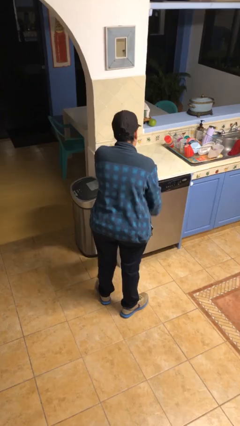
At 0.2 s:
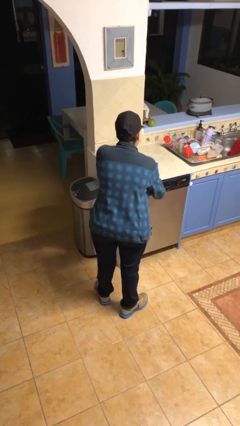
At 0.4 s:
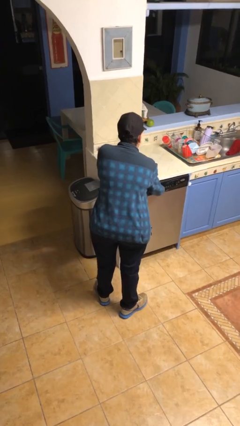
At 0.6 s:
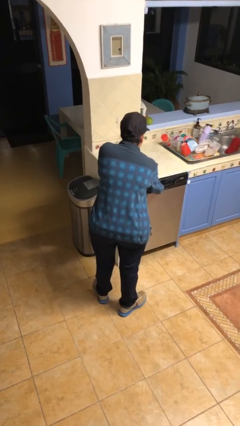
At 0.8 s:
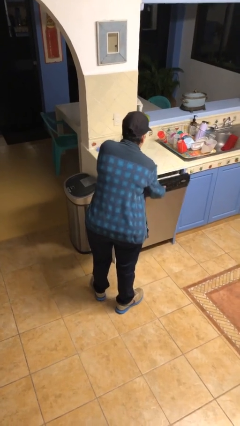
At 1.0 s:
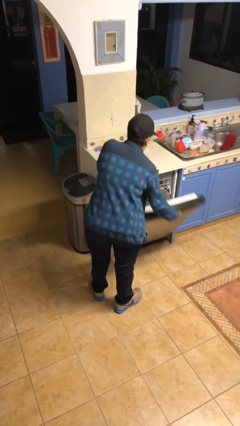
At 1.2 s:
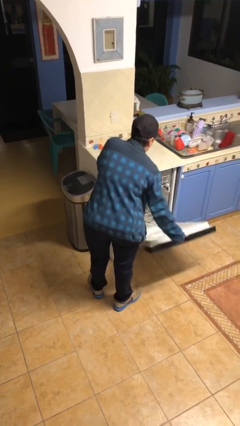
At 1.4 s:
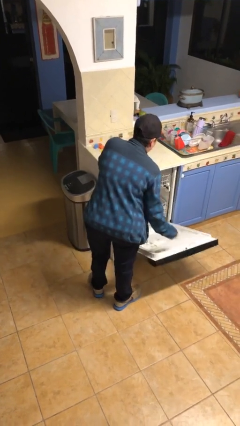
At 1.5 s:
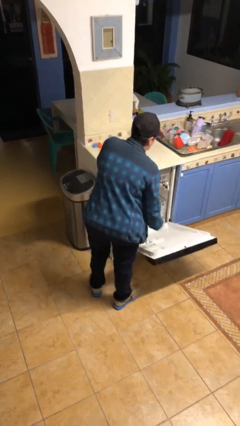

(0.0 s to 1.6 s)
person opens dishwasher

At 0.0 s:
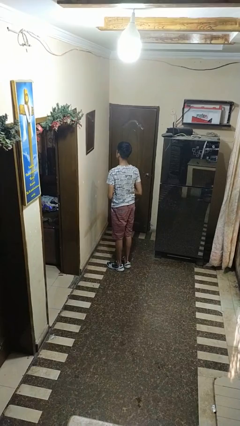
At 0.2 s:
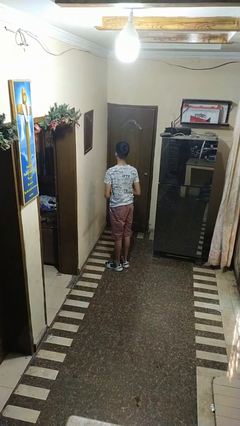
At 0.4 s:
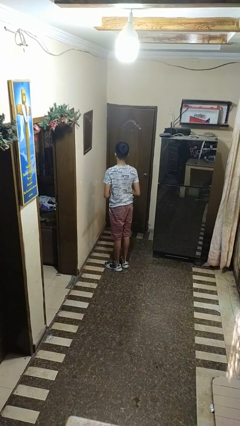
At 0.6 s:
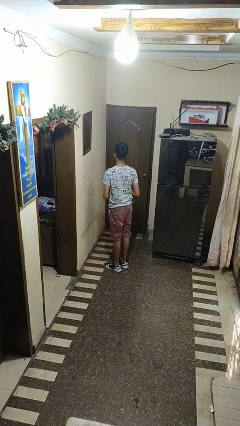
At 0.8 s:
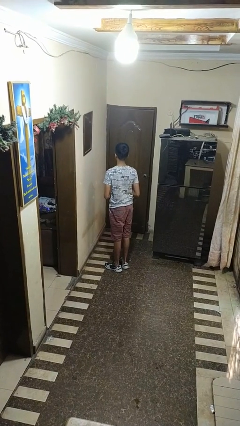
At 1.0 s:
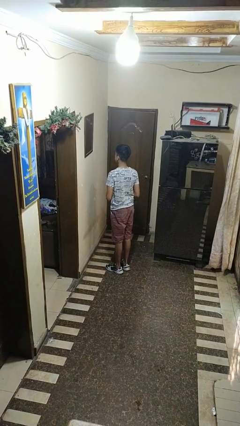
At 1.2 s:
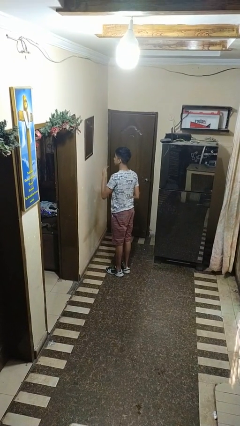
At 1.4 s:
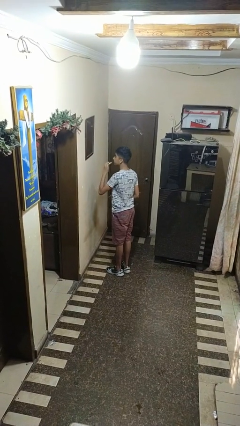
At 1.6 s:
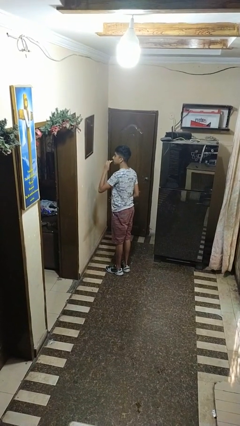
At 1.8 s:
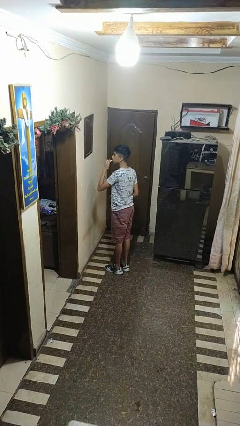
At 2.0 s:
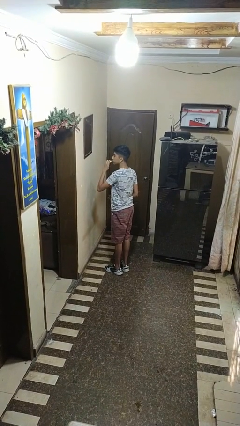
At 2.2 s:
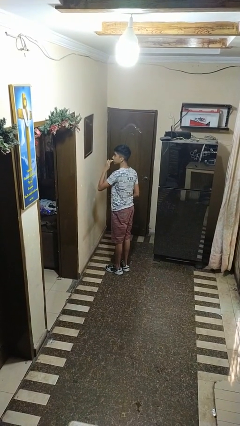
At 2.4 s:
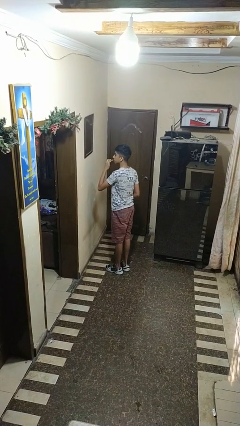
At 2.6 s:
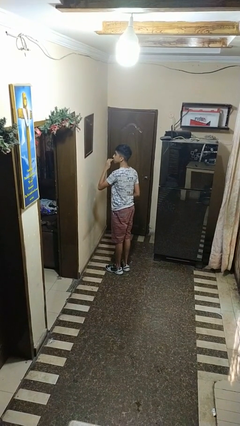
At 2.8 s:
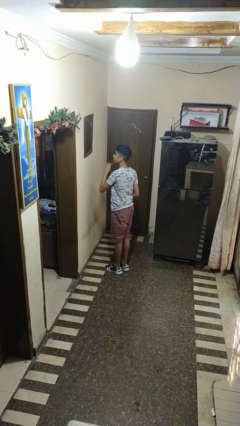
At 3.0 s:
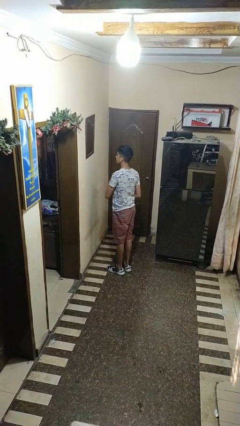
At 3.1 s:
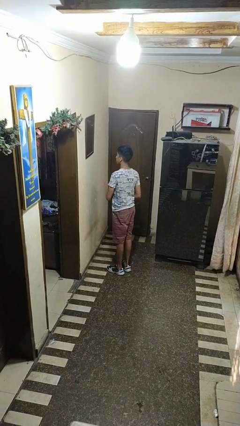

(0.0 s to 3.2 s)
person applies lip makeup

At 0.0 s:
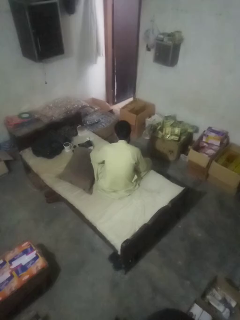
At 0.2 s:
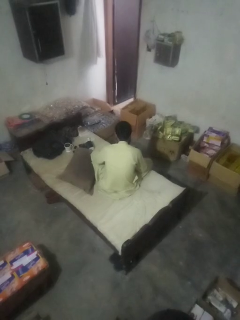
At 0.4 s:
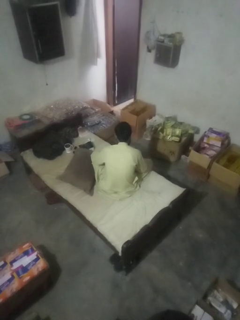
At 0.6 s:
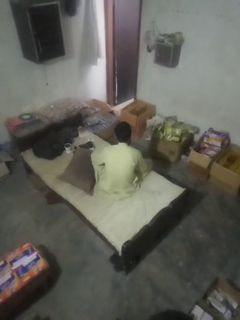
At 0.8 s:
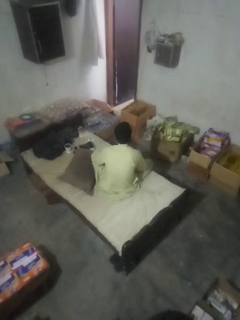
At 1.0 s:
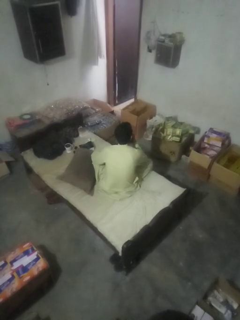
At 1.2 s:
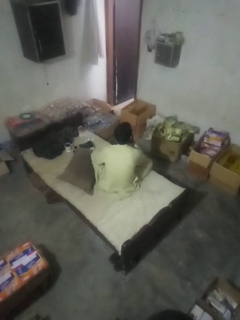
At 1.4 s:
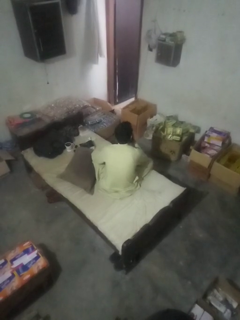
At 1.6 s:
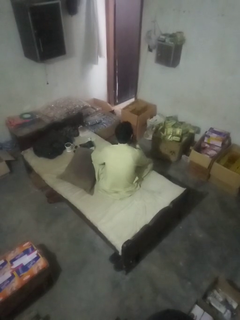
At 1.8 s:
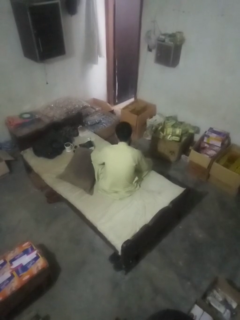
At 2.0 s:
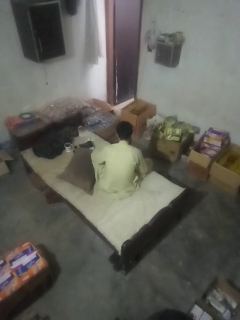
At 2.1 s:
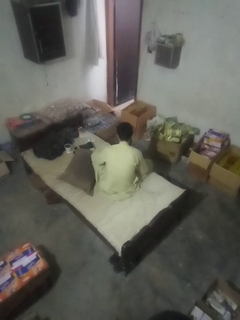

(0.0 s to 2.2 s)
person gestures be quiet

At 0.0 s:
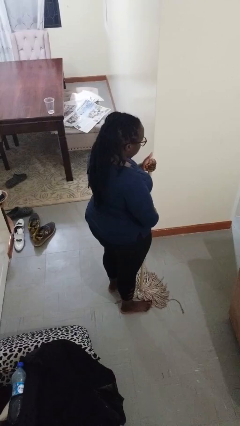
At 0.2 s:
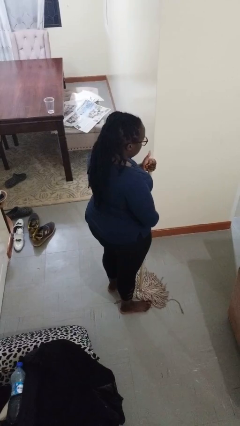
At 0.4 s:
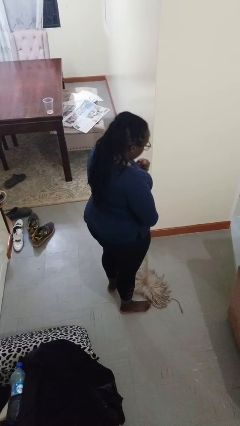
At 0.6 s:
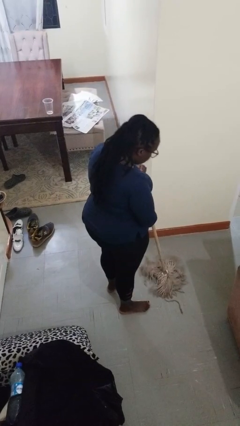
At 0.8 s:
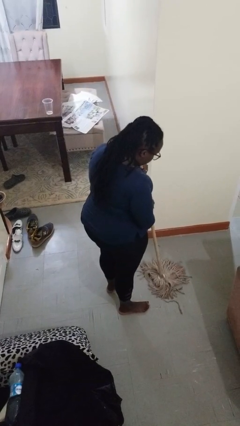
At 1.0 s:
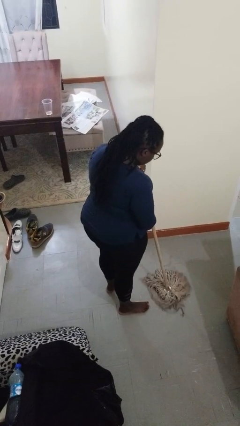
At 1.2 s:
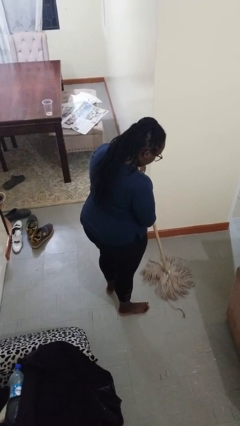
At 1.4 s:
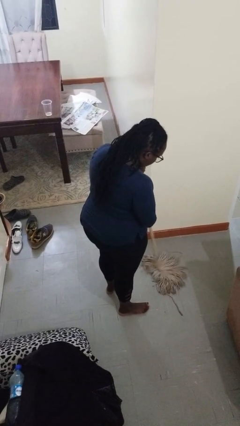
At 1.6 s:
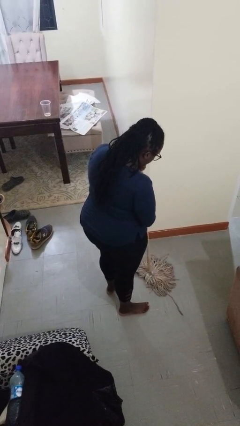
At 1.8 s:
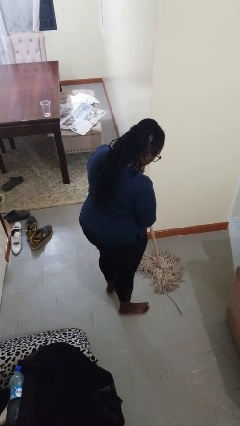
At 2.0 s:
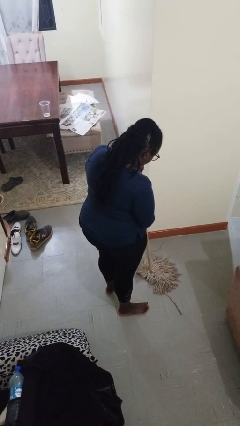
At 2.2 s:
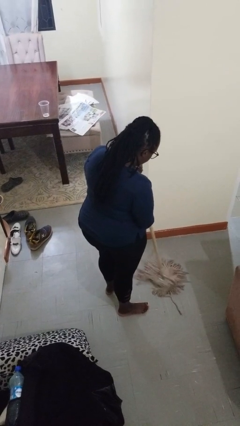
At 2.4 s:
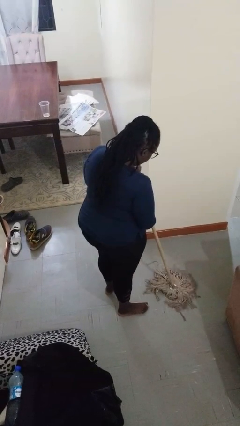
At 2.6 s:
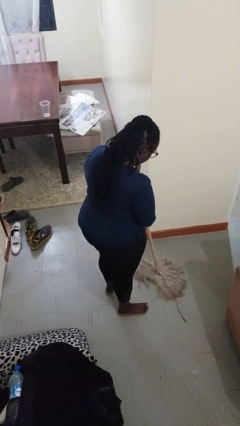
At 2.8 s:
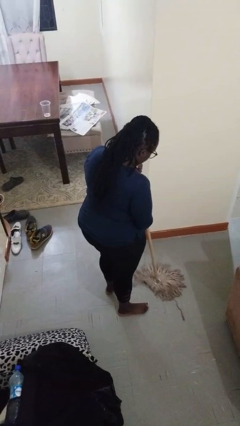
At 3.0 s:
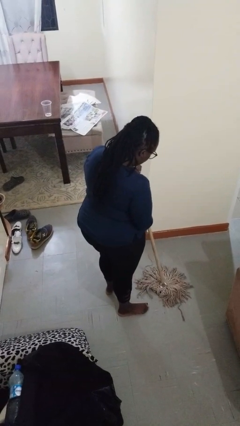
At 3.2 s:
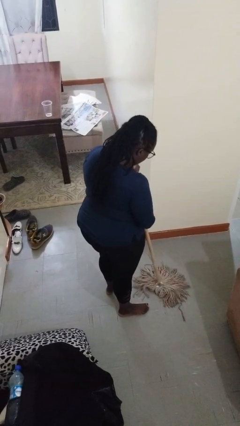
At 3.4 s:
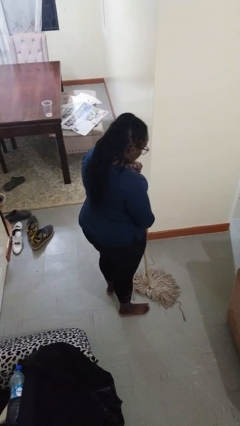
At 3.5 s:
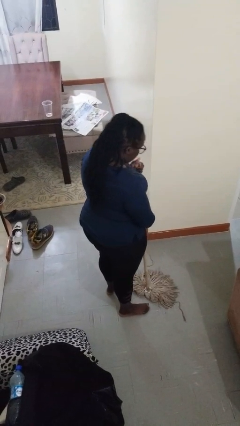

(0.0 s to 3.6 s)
person mops

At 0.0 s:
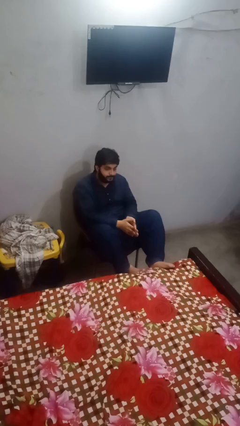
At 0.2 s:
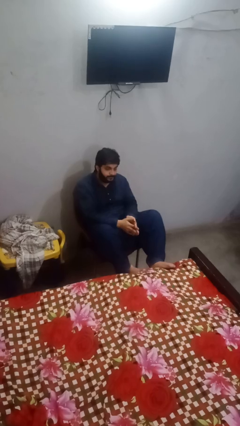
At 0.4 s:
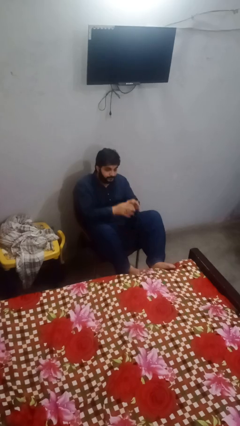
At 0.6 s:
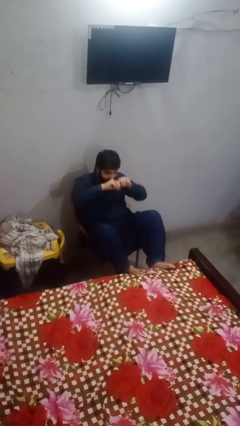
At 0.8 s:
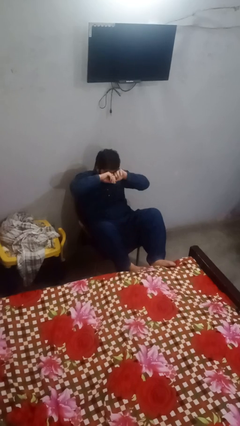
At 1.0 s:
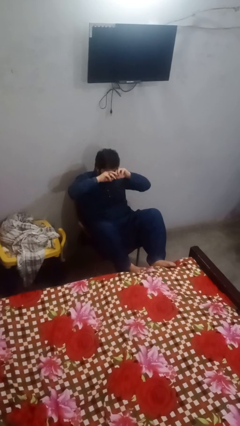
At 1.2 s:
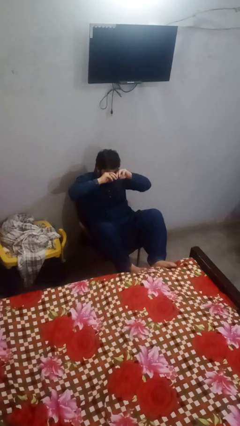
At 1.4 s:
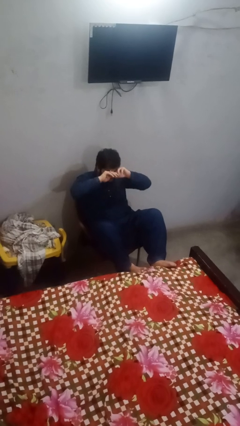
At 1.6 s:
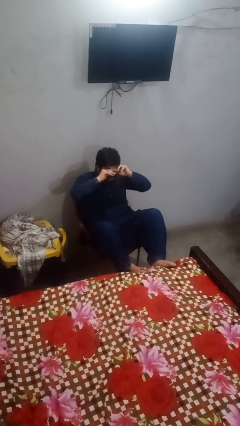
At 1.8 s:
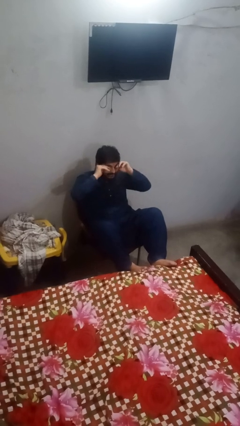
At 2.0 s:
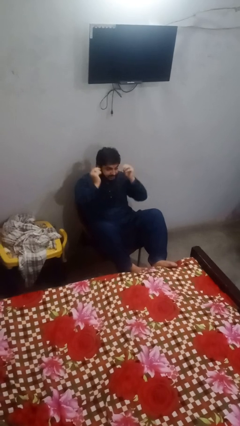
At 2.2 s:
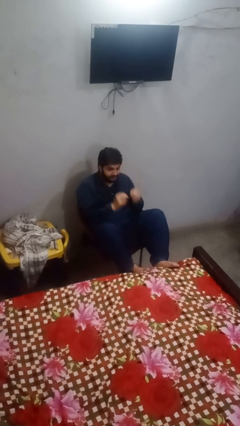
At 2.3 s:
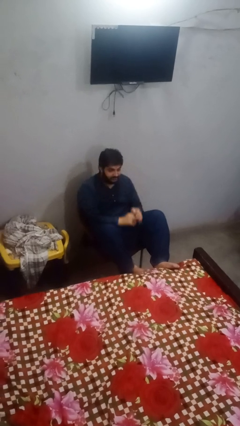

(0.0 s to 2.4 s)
person rubs eyes

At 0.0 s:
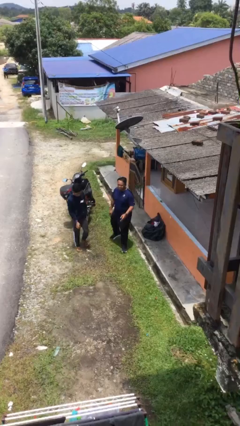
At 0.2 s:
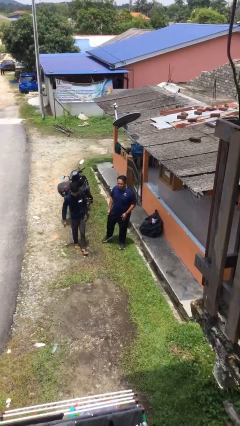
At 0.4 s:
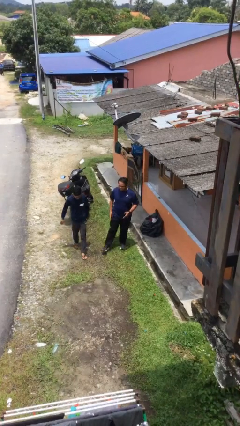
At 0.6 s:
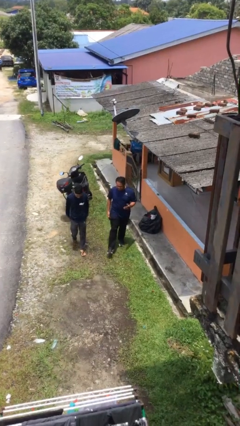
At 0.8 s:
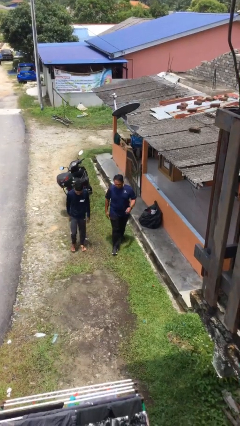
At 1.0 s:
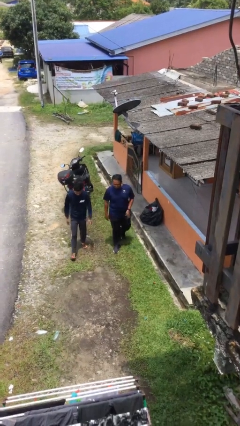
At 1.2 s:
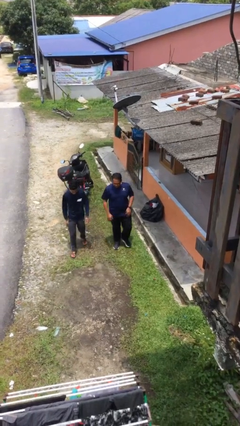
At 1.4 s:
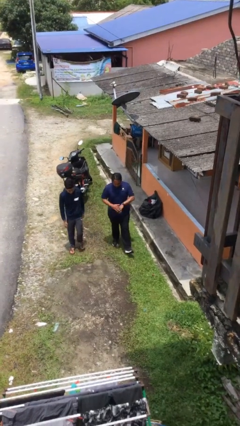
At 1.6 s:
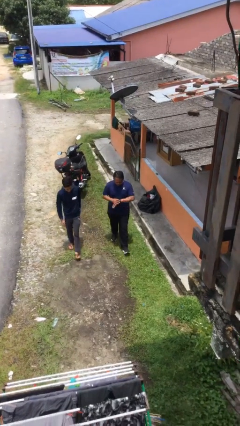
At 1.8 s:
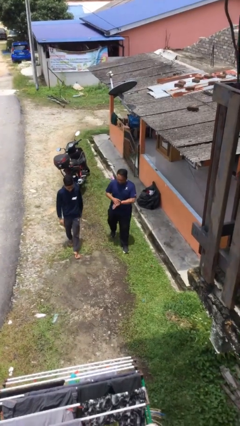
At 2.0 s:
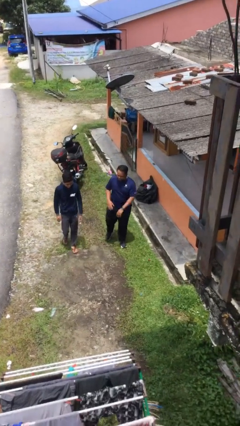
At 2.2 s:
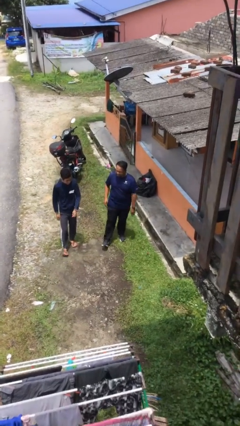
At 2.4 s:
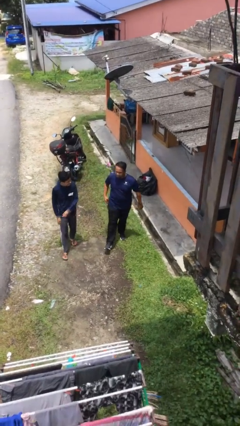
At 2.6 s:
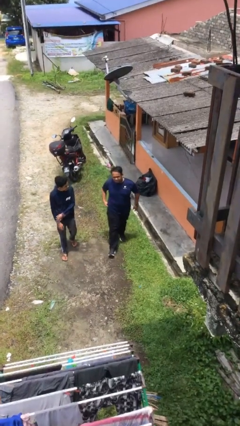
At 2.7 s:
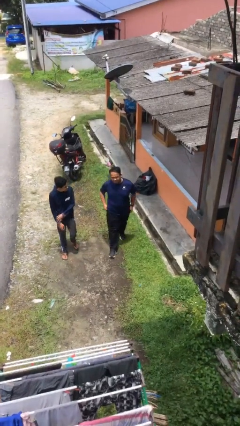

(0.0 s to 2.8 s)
person talks to person

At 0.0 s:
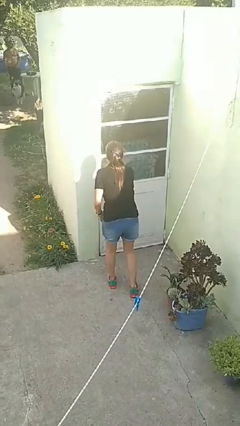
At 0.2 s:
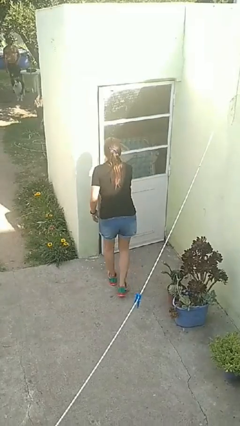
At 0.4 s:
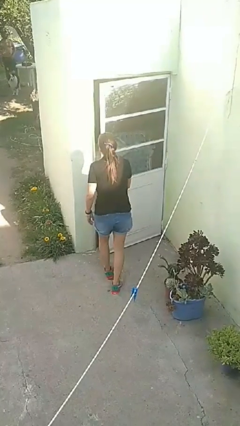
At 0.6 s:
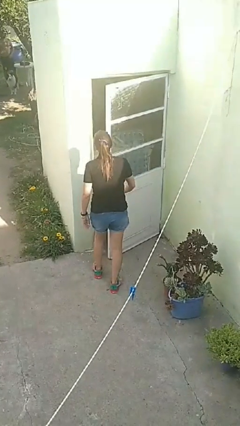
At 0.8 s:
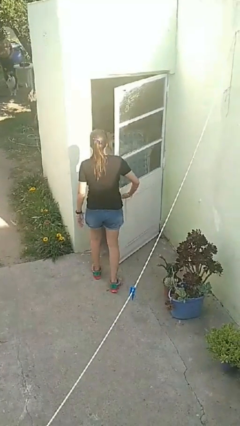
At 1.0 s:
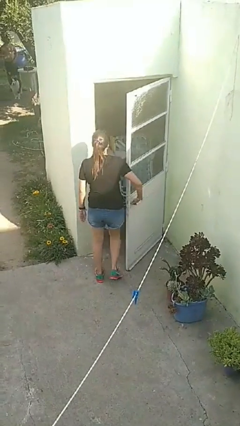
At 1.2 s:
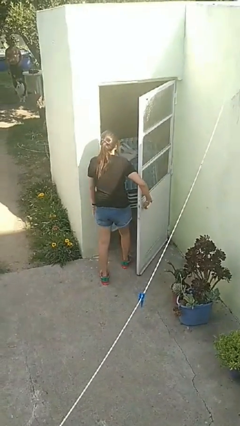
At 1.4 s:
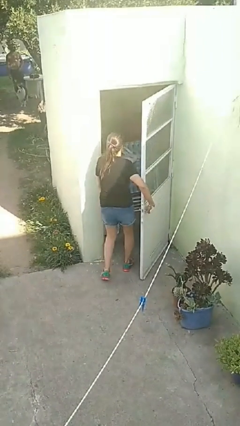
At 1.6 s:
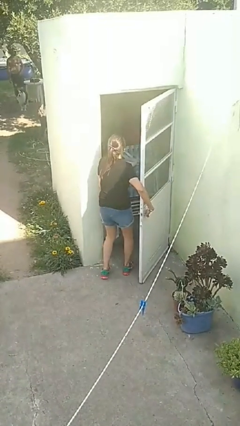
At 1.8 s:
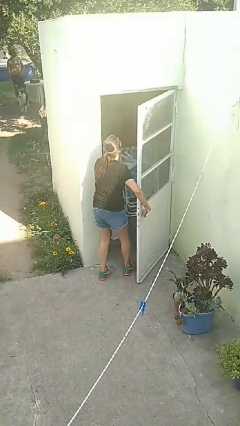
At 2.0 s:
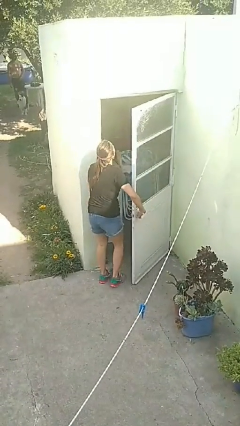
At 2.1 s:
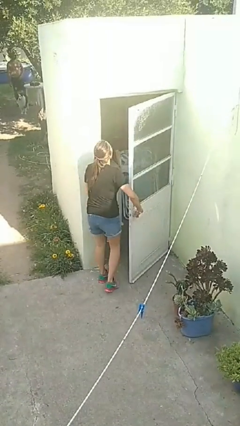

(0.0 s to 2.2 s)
person opens facility door
